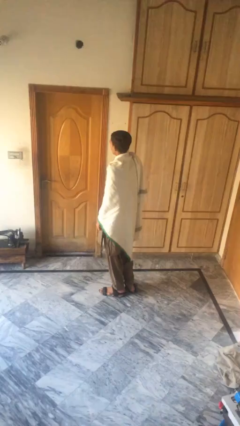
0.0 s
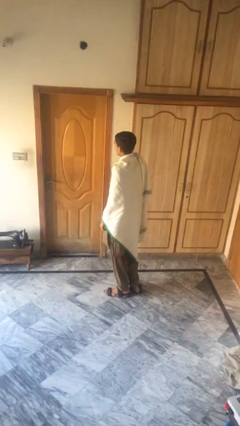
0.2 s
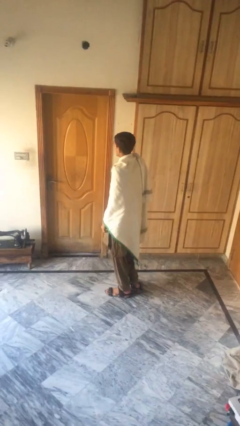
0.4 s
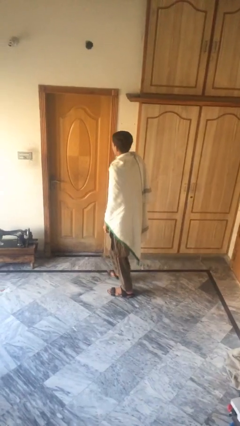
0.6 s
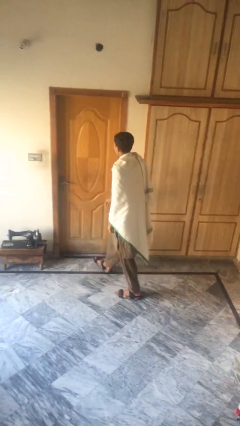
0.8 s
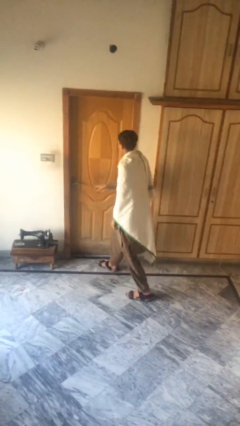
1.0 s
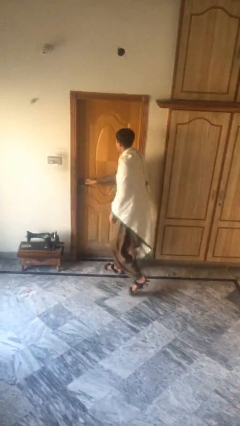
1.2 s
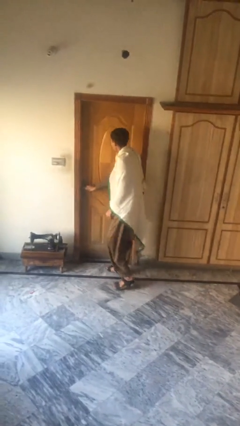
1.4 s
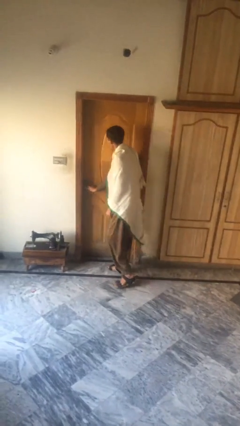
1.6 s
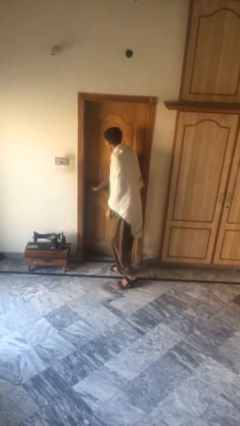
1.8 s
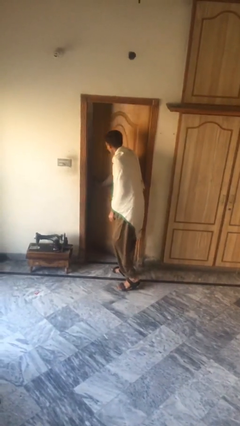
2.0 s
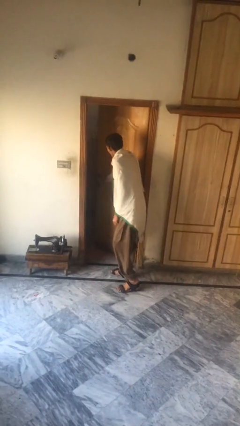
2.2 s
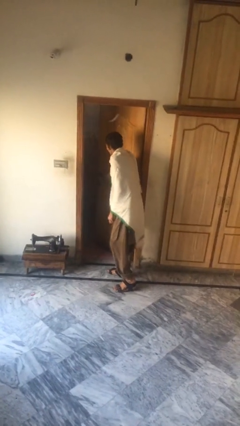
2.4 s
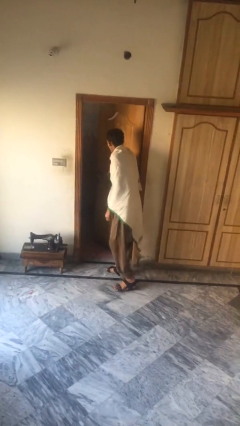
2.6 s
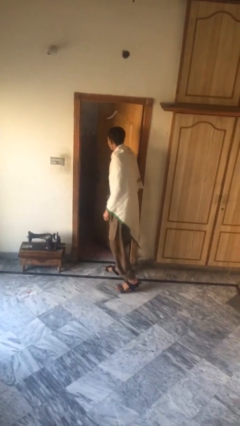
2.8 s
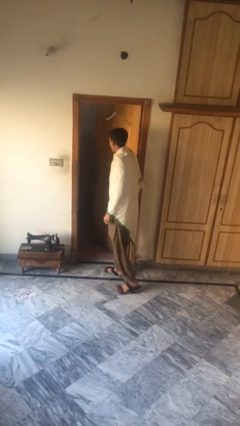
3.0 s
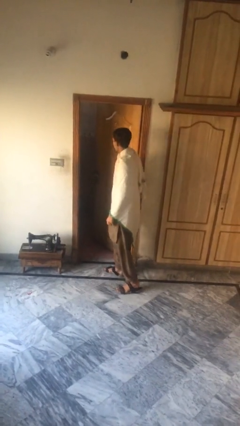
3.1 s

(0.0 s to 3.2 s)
person opens facility door

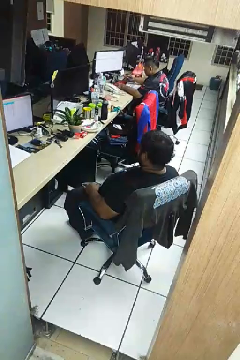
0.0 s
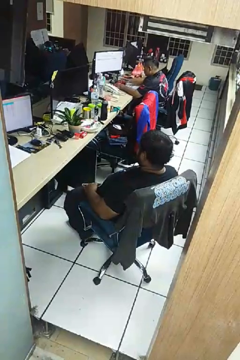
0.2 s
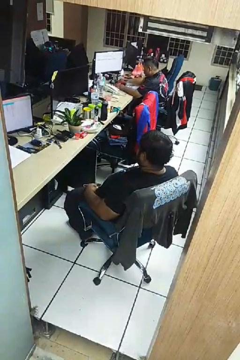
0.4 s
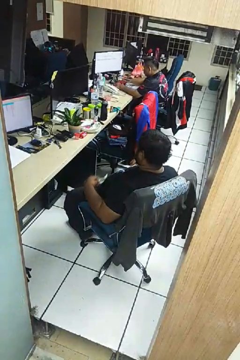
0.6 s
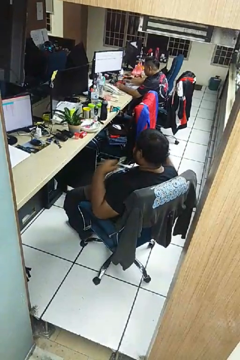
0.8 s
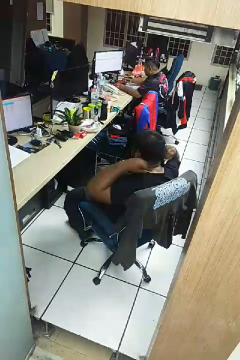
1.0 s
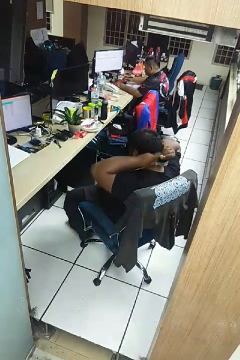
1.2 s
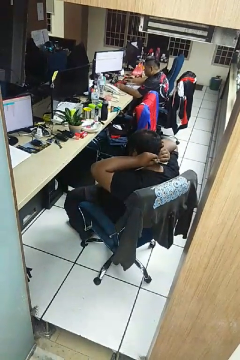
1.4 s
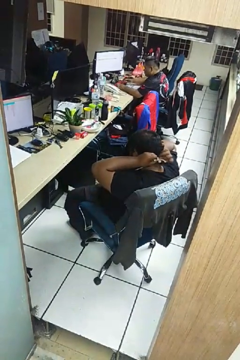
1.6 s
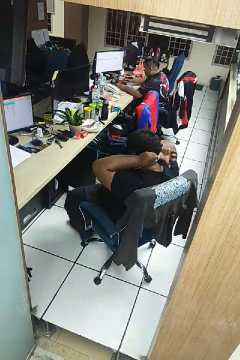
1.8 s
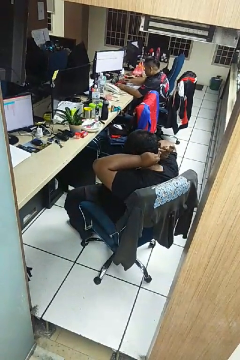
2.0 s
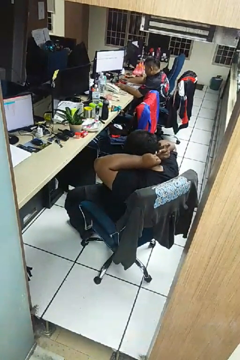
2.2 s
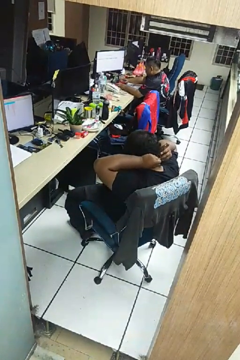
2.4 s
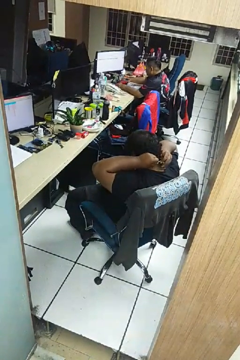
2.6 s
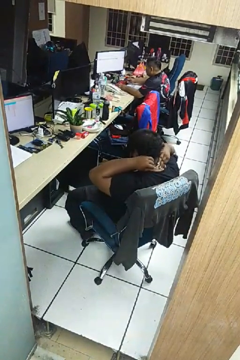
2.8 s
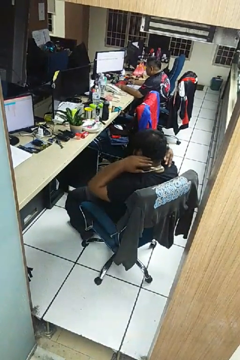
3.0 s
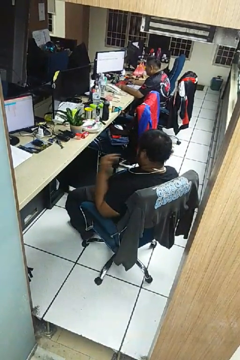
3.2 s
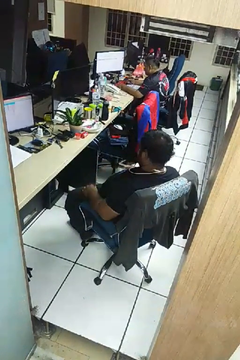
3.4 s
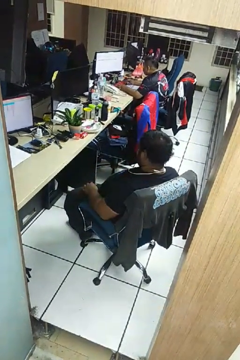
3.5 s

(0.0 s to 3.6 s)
person puts on necklace

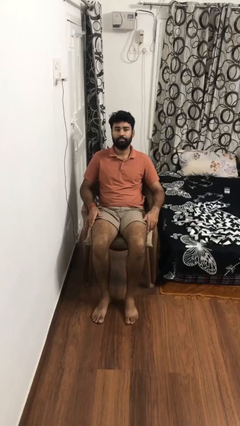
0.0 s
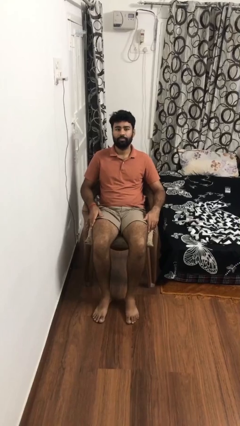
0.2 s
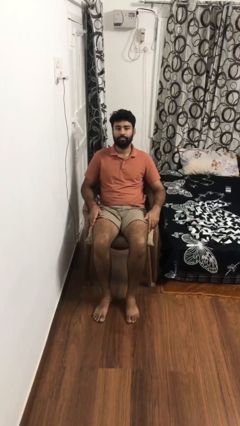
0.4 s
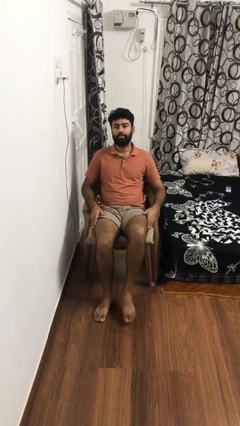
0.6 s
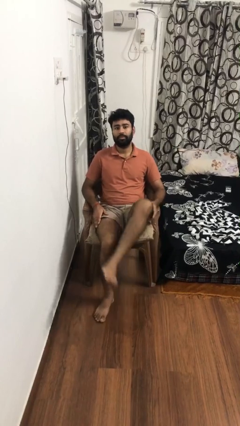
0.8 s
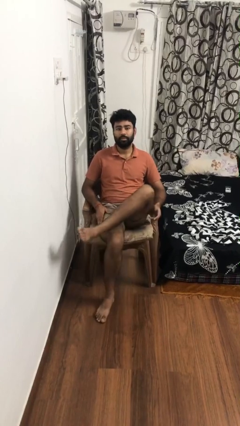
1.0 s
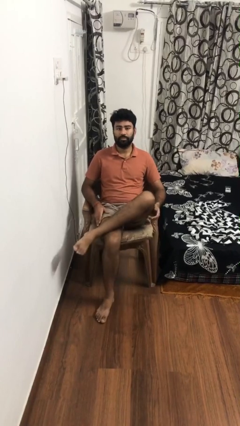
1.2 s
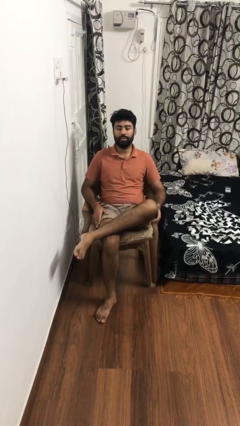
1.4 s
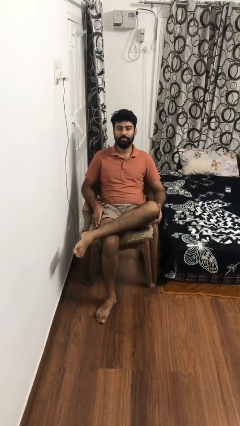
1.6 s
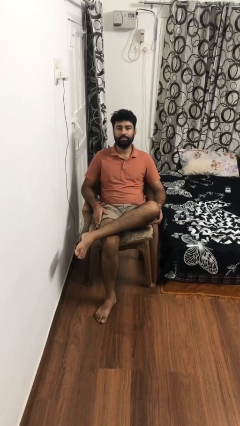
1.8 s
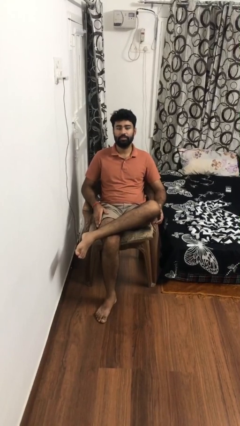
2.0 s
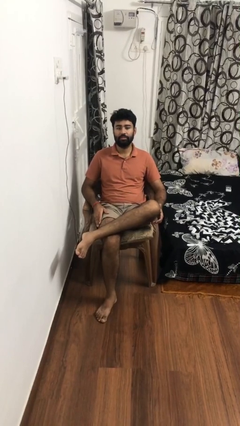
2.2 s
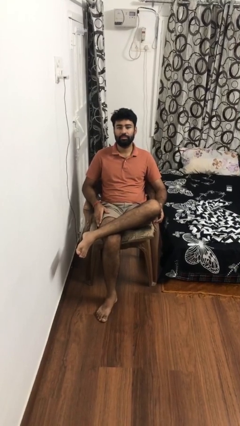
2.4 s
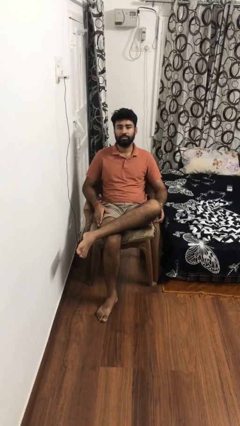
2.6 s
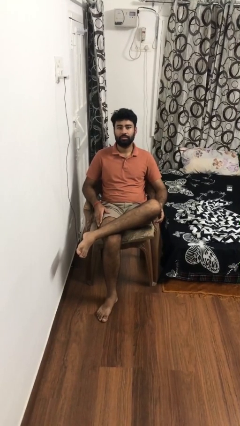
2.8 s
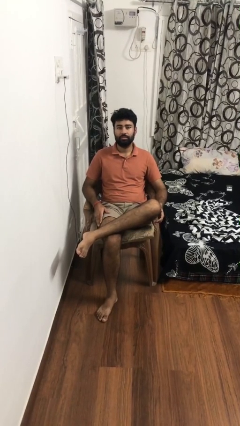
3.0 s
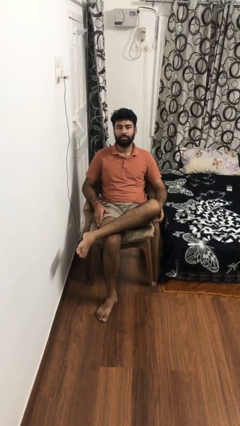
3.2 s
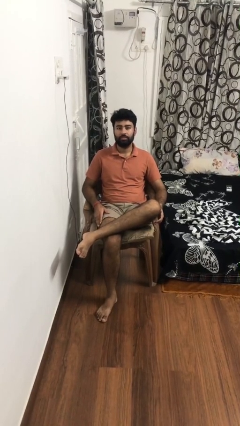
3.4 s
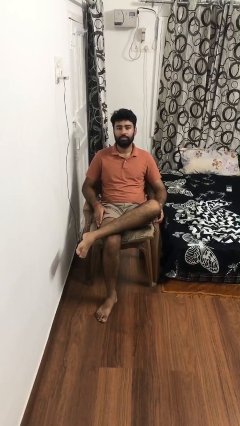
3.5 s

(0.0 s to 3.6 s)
person crosses legs

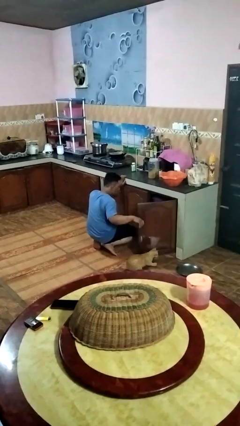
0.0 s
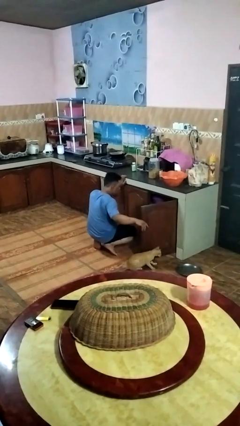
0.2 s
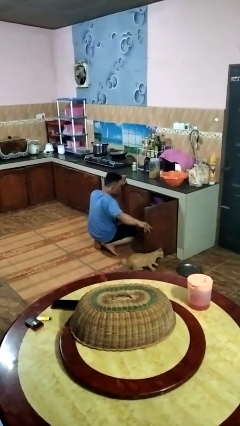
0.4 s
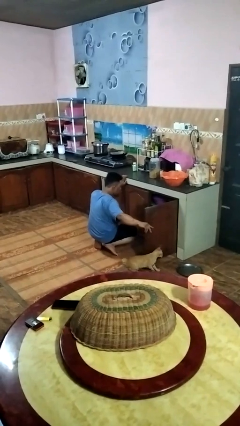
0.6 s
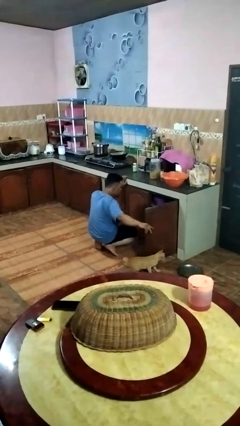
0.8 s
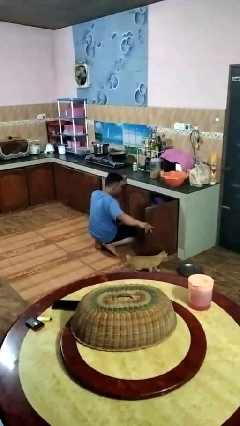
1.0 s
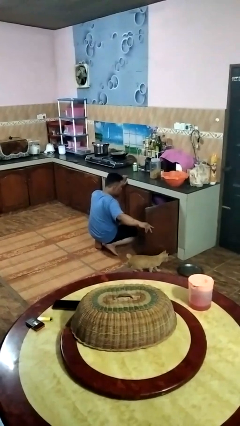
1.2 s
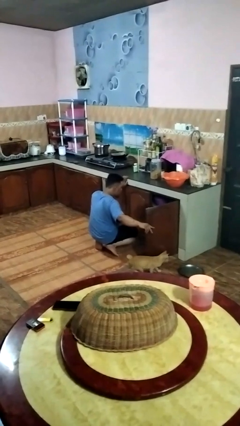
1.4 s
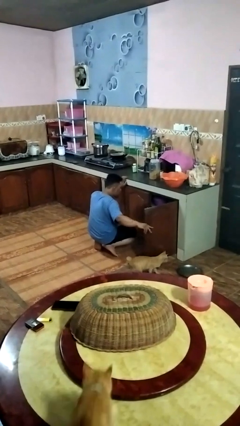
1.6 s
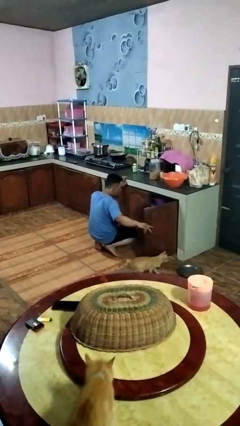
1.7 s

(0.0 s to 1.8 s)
person opens kitchen drawer

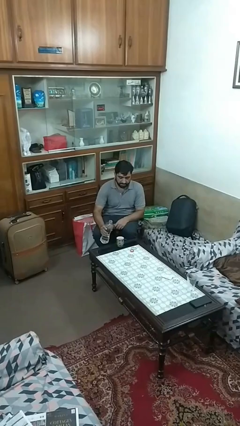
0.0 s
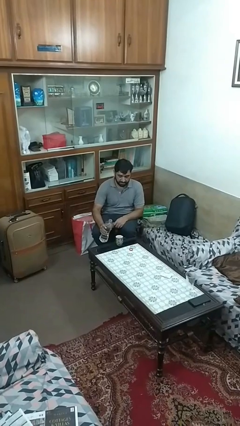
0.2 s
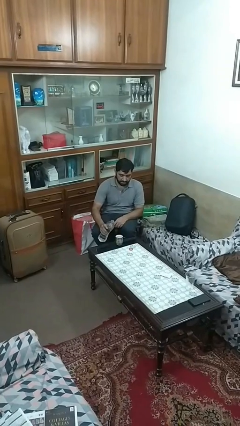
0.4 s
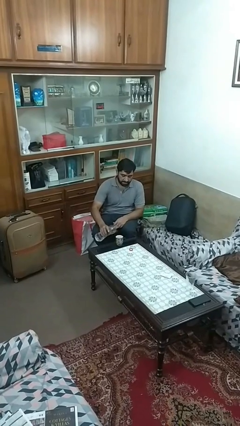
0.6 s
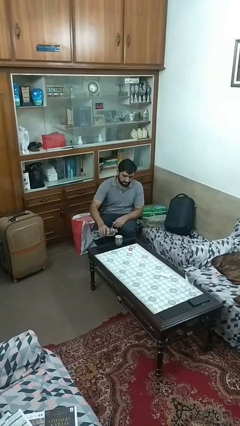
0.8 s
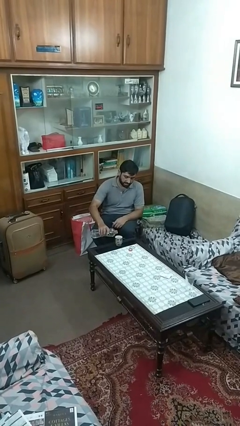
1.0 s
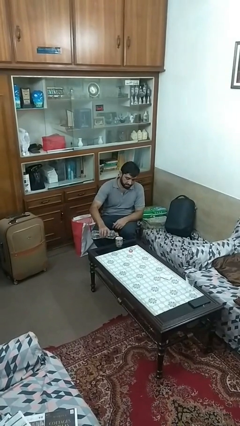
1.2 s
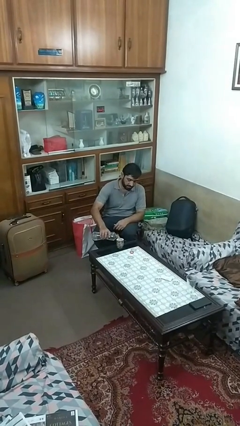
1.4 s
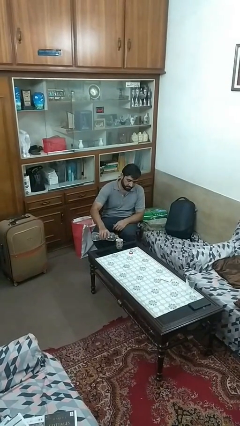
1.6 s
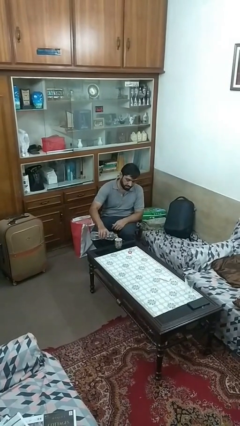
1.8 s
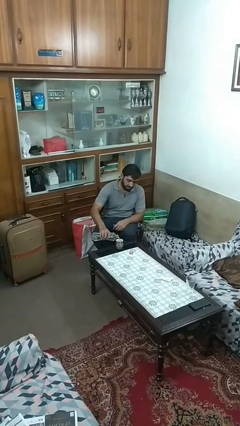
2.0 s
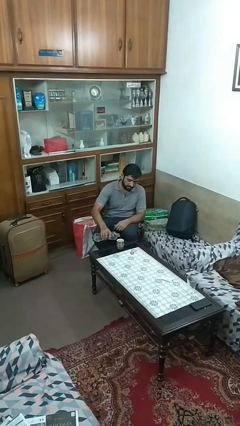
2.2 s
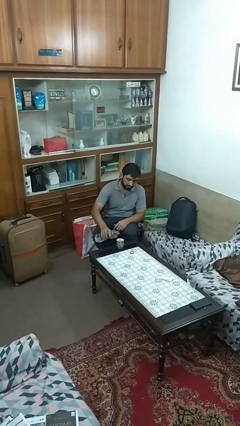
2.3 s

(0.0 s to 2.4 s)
person pours liquid into cup

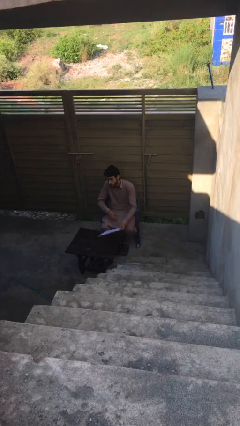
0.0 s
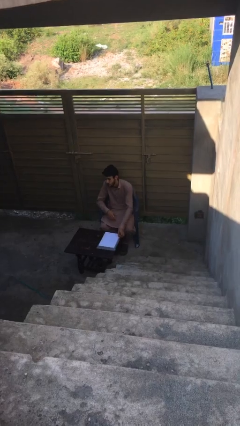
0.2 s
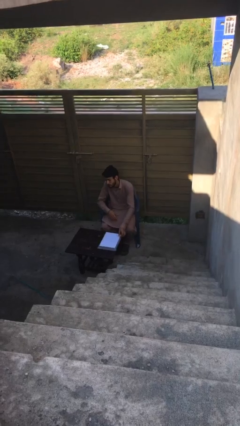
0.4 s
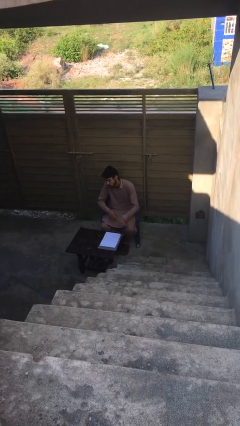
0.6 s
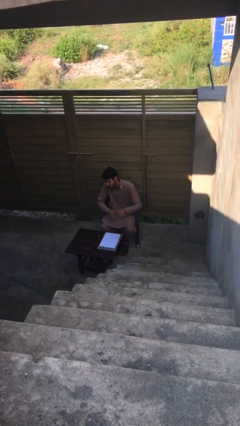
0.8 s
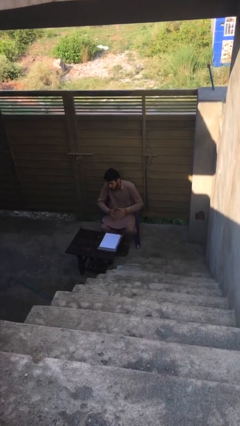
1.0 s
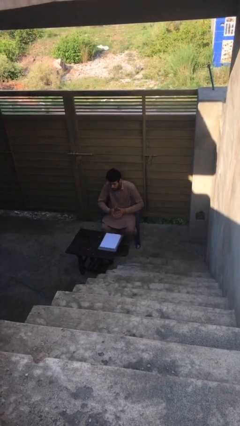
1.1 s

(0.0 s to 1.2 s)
person puts down object on table

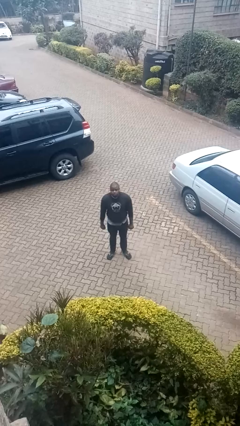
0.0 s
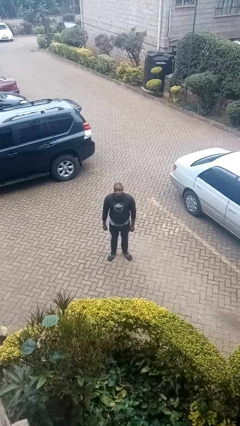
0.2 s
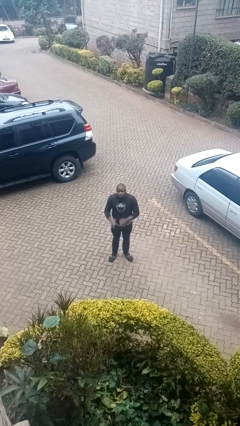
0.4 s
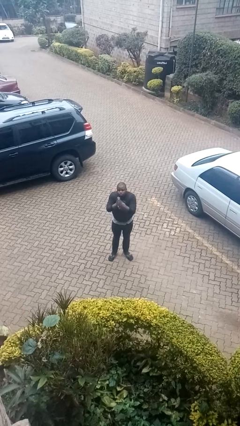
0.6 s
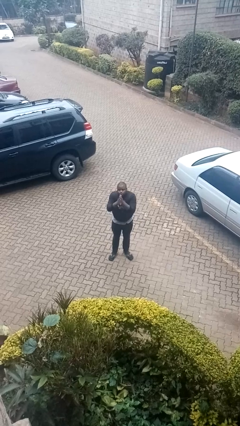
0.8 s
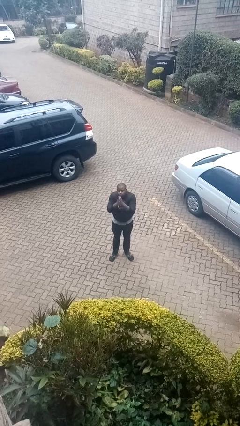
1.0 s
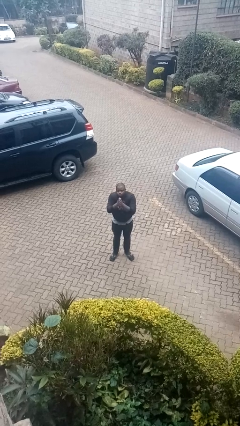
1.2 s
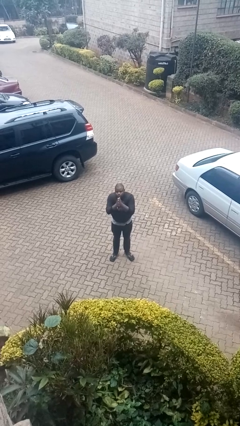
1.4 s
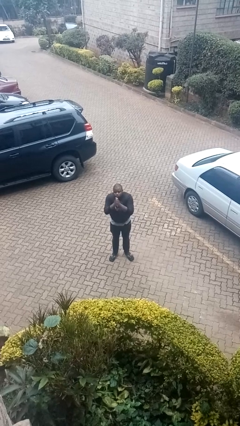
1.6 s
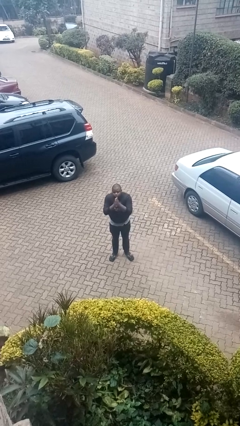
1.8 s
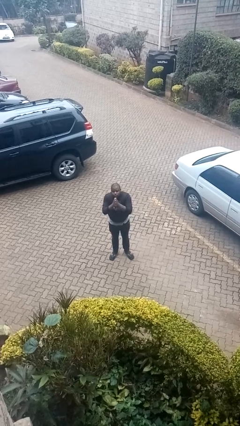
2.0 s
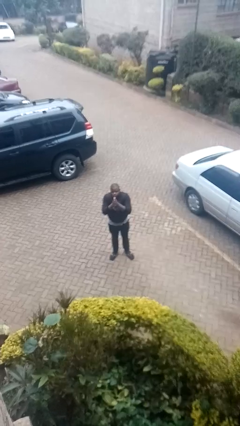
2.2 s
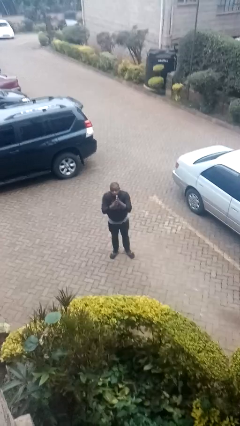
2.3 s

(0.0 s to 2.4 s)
person blows into hands
